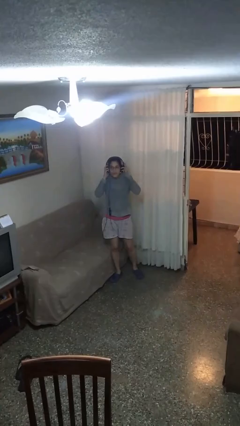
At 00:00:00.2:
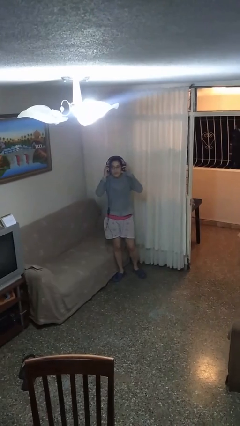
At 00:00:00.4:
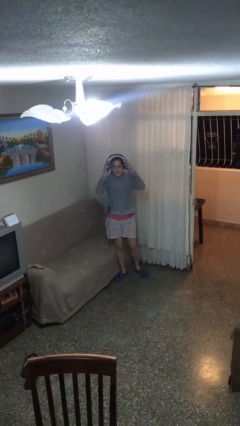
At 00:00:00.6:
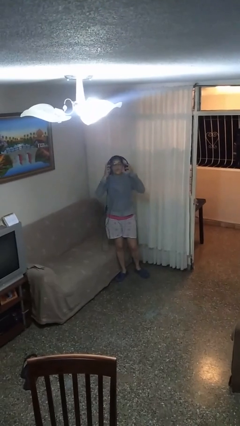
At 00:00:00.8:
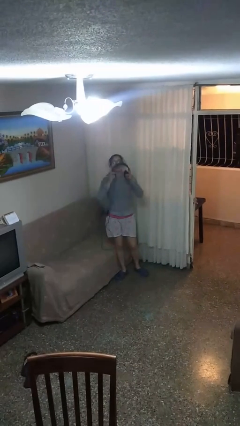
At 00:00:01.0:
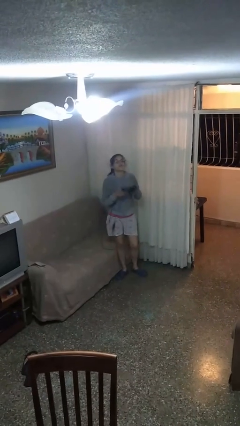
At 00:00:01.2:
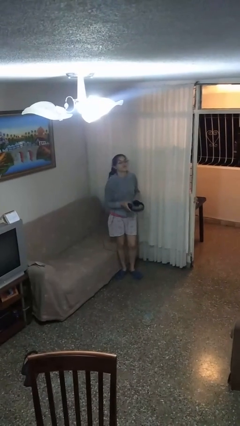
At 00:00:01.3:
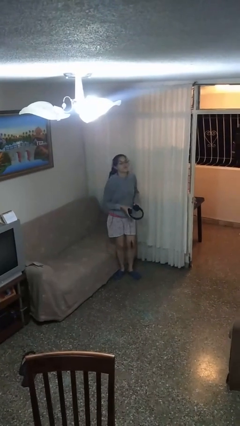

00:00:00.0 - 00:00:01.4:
person takes off headphones

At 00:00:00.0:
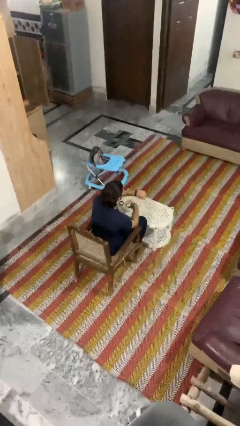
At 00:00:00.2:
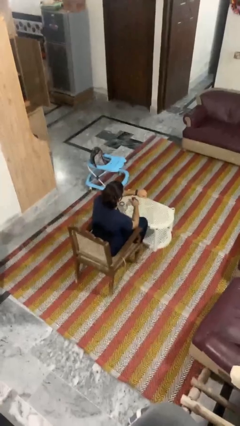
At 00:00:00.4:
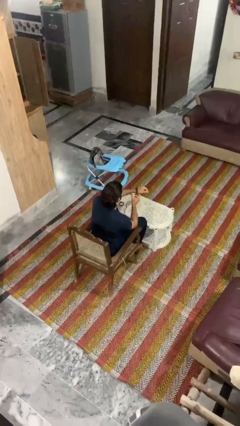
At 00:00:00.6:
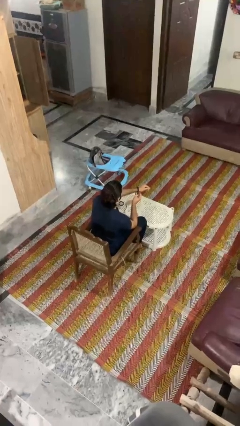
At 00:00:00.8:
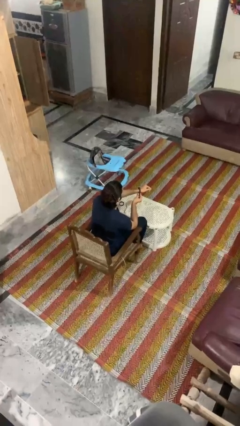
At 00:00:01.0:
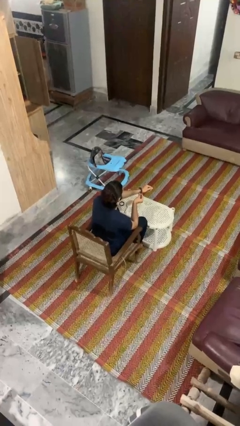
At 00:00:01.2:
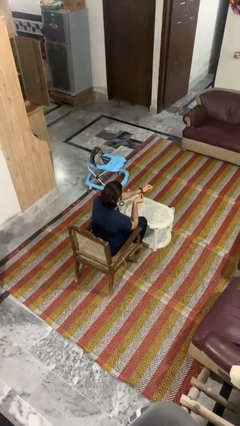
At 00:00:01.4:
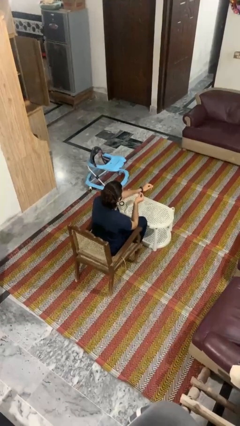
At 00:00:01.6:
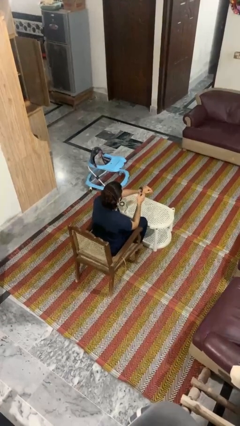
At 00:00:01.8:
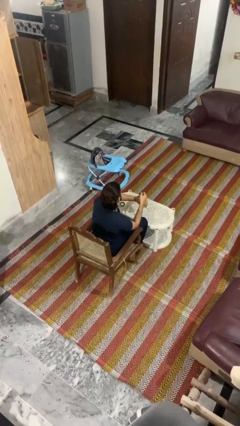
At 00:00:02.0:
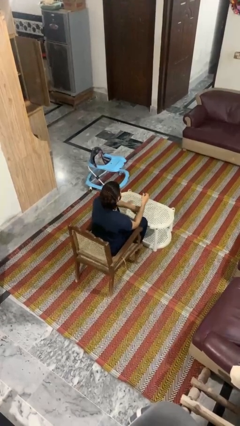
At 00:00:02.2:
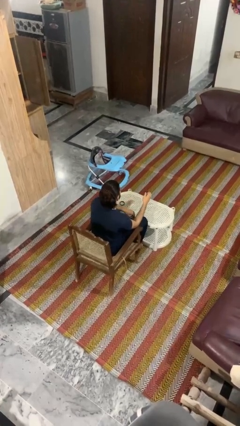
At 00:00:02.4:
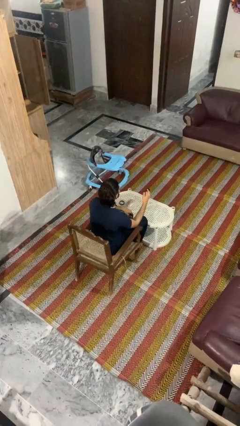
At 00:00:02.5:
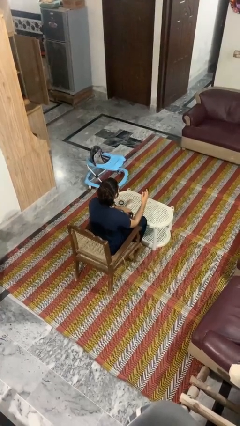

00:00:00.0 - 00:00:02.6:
person takes off wristwatch

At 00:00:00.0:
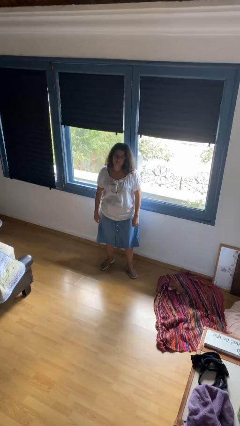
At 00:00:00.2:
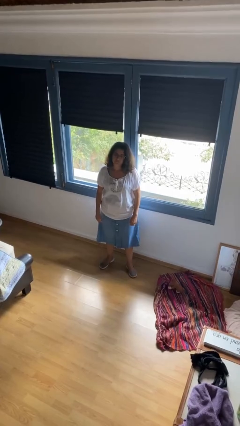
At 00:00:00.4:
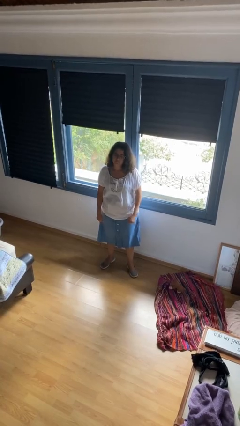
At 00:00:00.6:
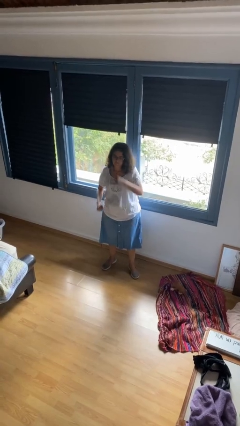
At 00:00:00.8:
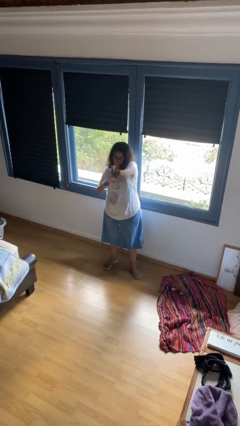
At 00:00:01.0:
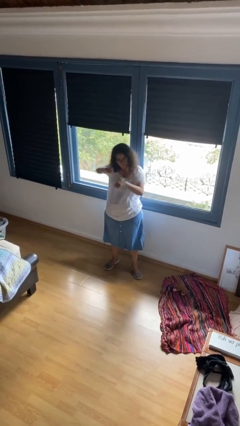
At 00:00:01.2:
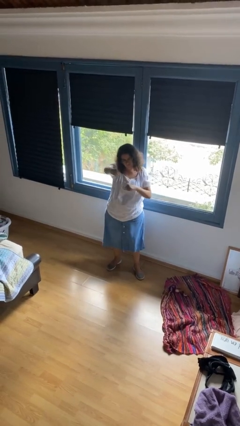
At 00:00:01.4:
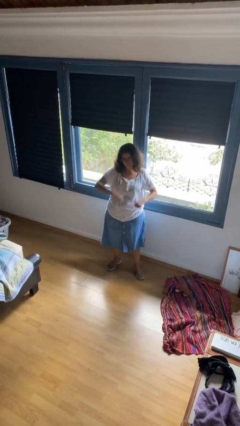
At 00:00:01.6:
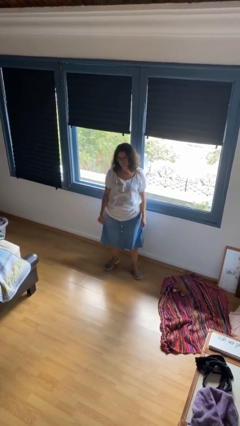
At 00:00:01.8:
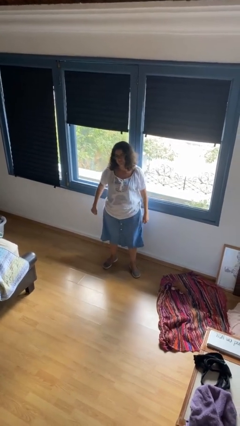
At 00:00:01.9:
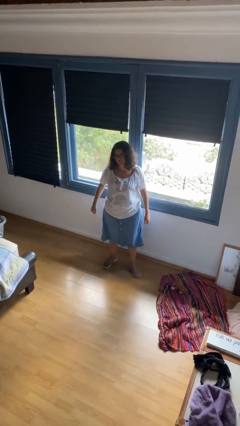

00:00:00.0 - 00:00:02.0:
person punches

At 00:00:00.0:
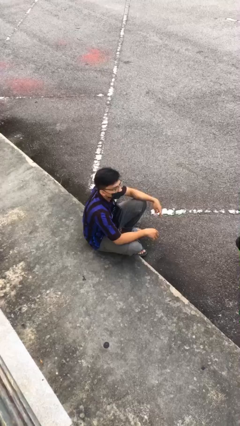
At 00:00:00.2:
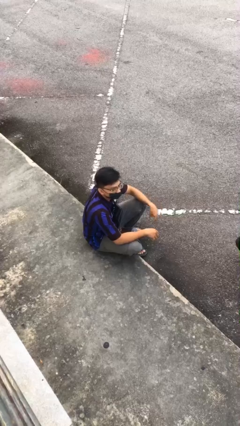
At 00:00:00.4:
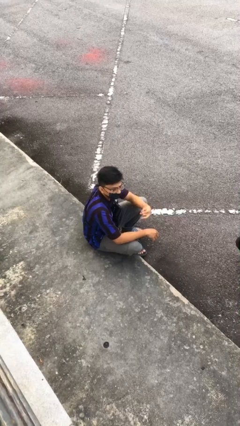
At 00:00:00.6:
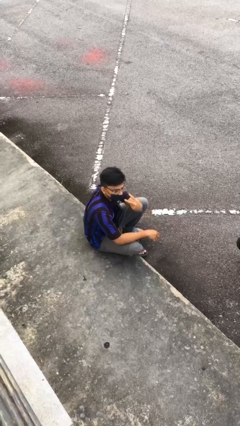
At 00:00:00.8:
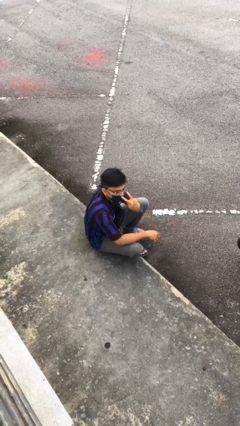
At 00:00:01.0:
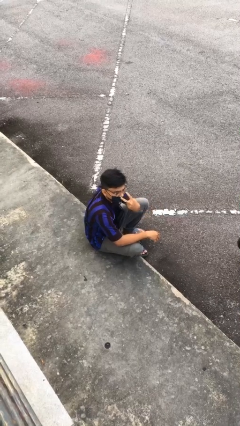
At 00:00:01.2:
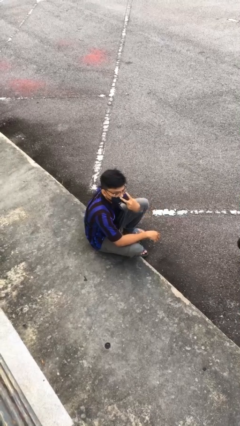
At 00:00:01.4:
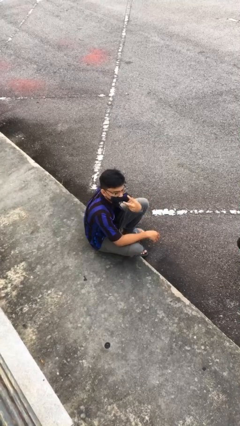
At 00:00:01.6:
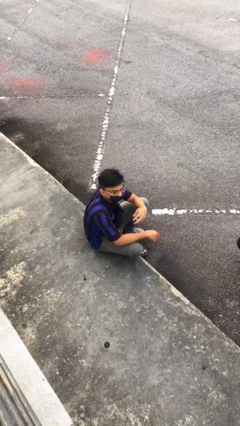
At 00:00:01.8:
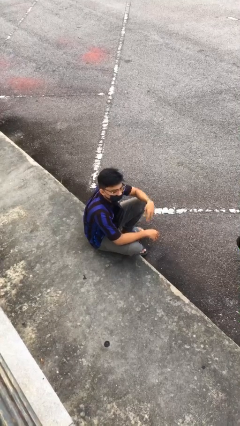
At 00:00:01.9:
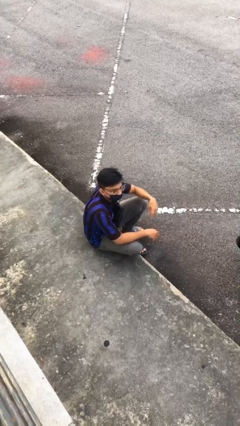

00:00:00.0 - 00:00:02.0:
person gestures watch closely

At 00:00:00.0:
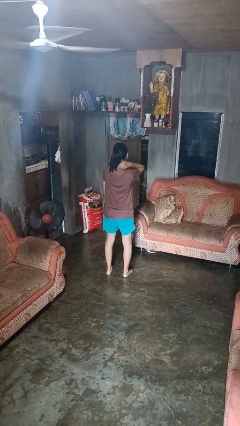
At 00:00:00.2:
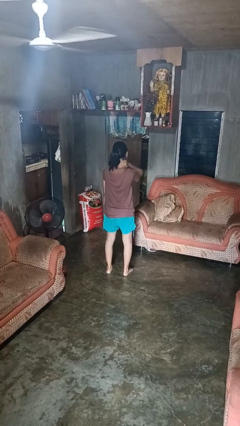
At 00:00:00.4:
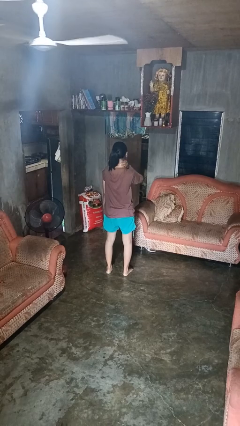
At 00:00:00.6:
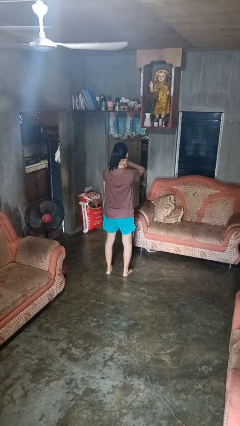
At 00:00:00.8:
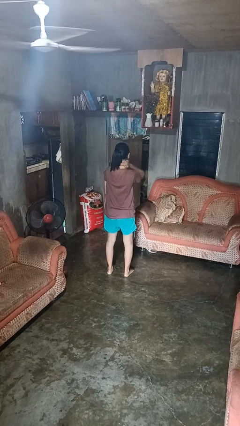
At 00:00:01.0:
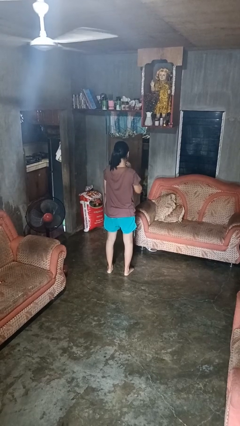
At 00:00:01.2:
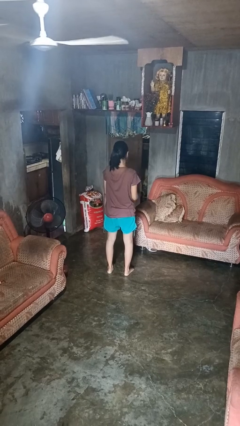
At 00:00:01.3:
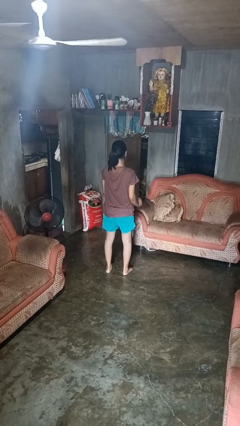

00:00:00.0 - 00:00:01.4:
person rubs neck

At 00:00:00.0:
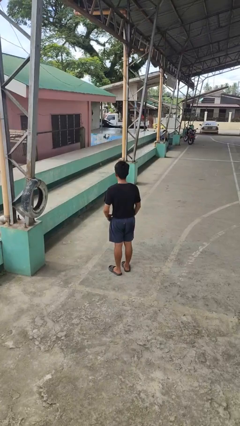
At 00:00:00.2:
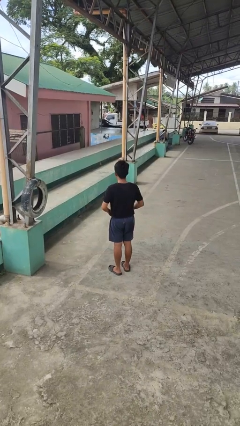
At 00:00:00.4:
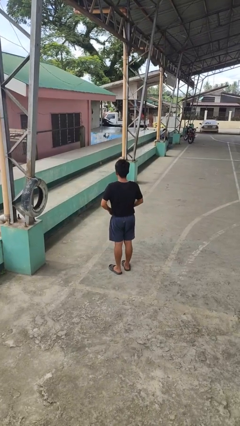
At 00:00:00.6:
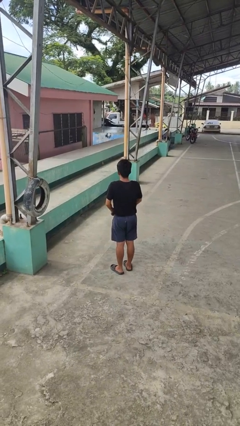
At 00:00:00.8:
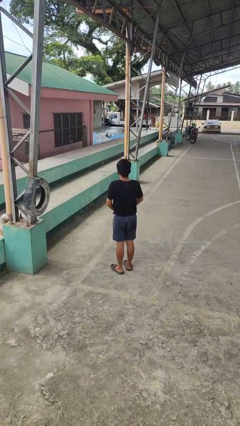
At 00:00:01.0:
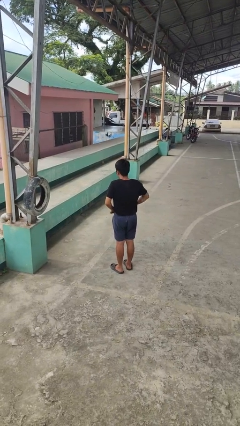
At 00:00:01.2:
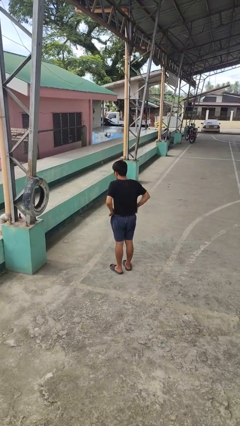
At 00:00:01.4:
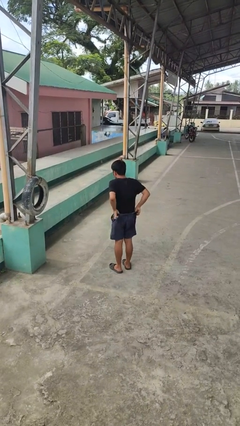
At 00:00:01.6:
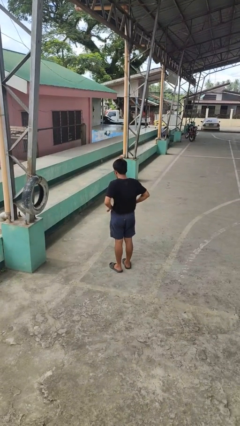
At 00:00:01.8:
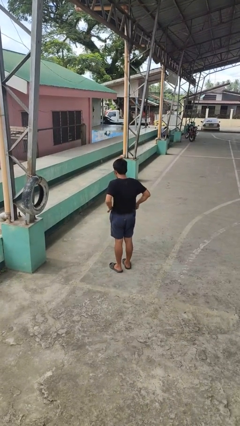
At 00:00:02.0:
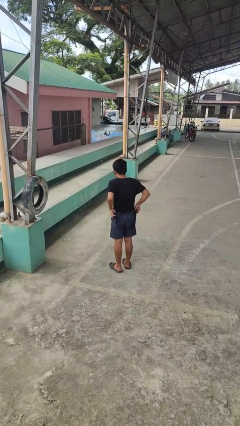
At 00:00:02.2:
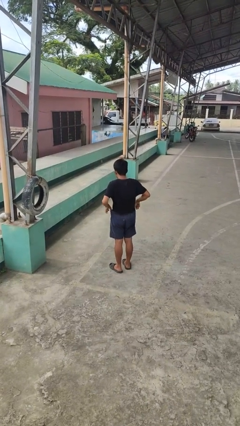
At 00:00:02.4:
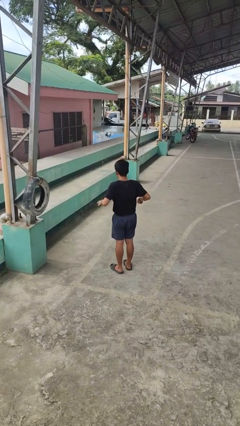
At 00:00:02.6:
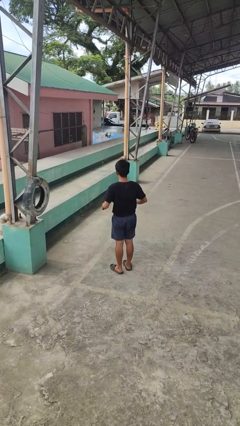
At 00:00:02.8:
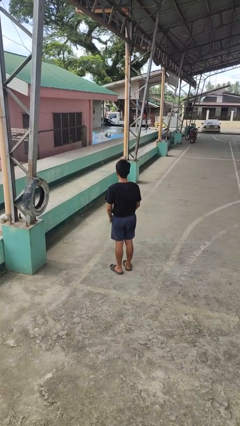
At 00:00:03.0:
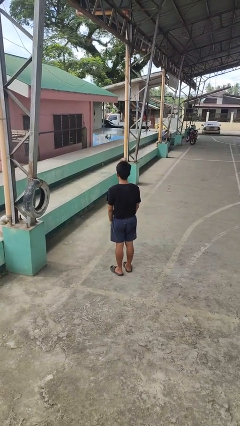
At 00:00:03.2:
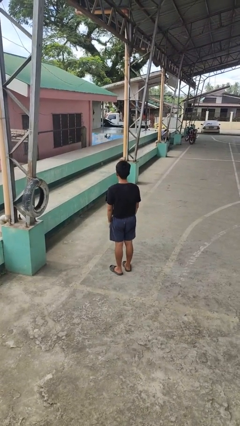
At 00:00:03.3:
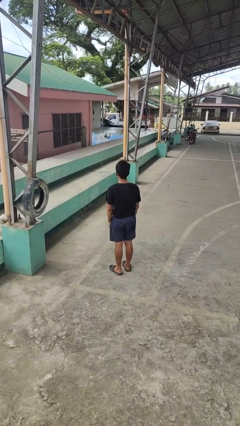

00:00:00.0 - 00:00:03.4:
person hikes up pants

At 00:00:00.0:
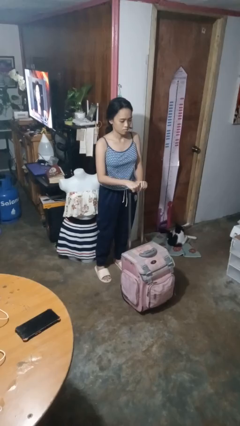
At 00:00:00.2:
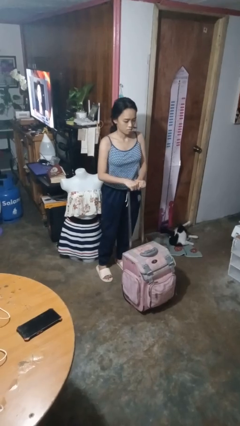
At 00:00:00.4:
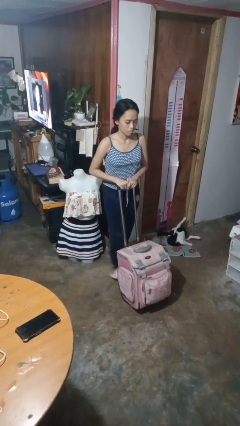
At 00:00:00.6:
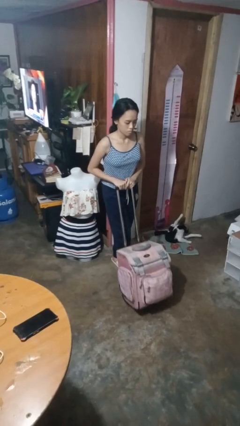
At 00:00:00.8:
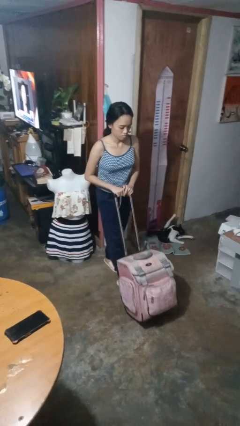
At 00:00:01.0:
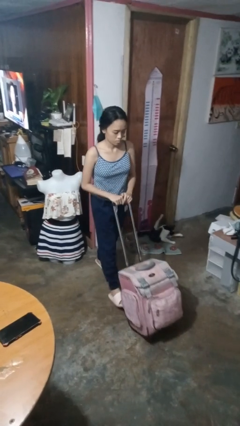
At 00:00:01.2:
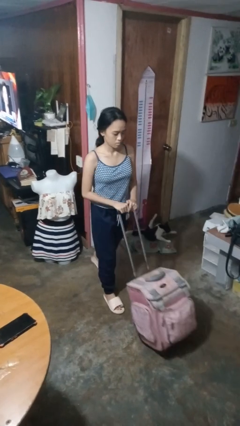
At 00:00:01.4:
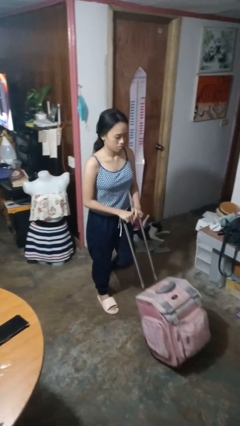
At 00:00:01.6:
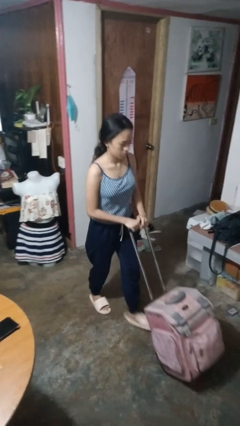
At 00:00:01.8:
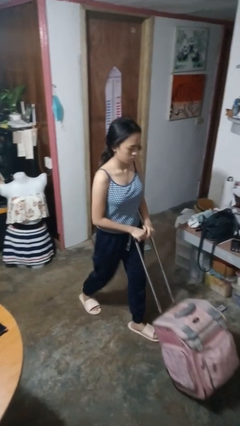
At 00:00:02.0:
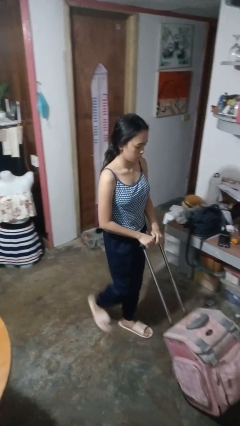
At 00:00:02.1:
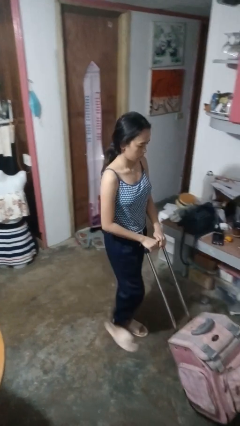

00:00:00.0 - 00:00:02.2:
person pushes wheeled cart

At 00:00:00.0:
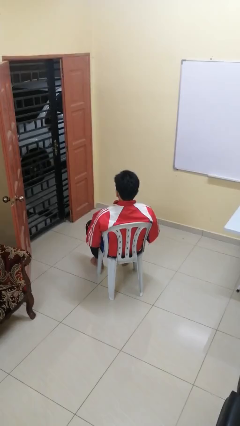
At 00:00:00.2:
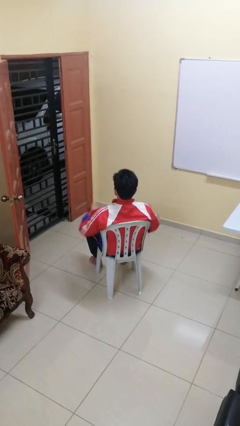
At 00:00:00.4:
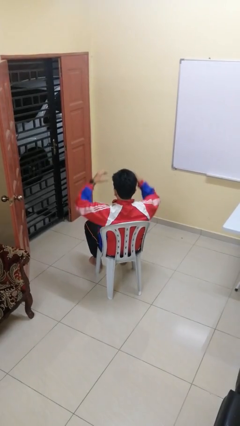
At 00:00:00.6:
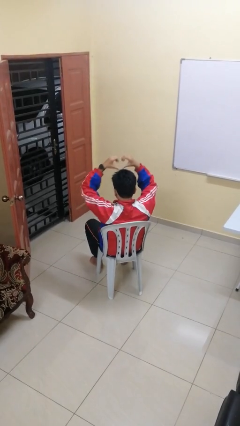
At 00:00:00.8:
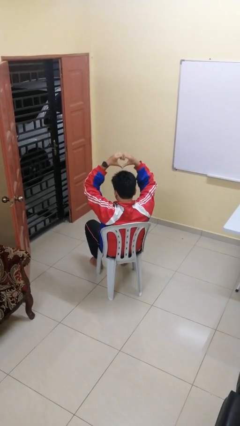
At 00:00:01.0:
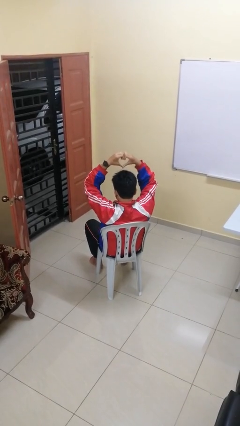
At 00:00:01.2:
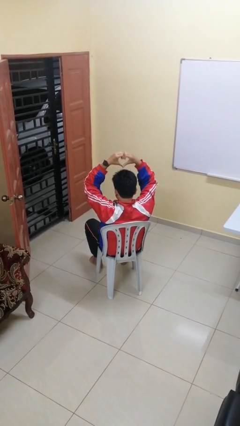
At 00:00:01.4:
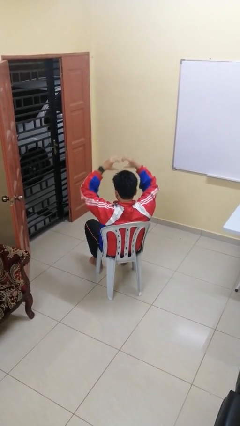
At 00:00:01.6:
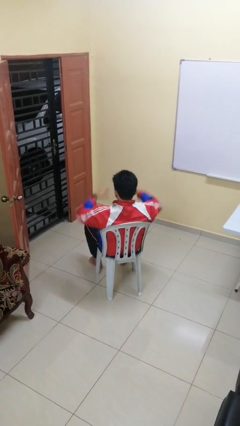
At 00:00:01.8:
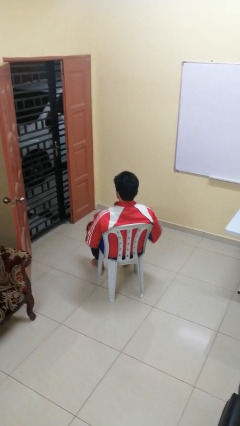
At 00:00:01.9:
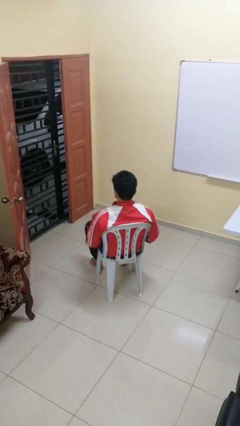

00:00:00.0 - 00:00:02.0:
person gestures heart
